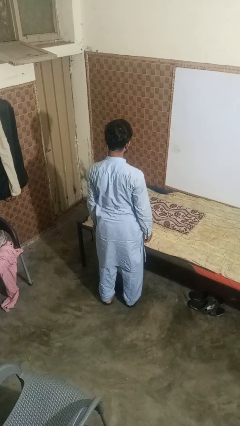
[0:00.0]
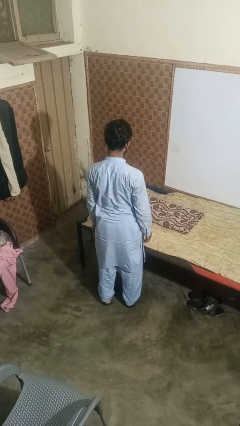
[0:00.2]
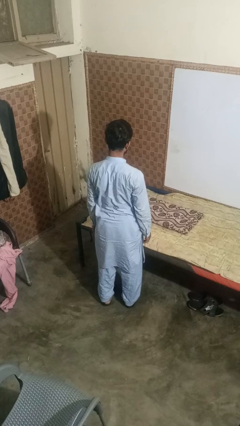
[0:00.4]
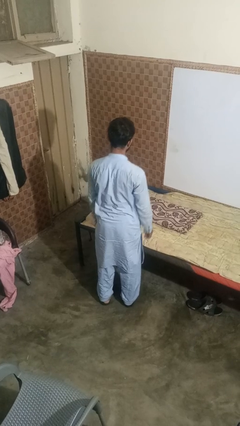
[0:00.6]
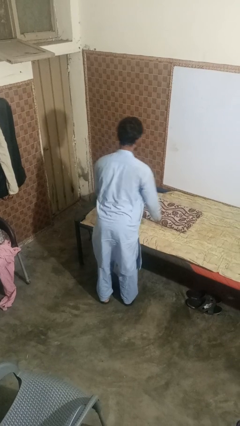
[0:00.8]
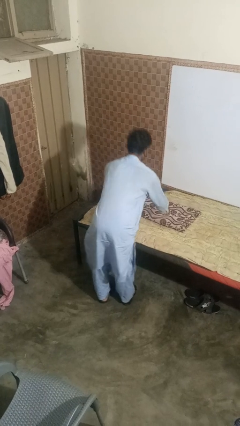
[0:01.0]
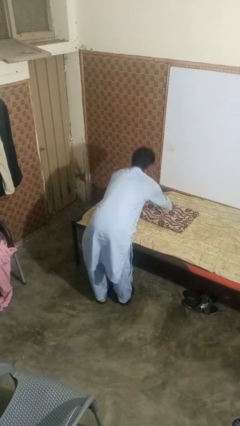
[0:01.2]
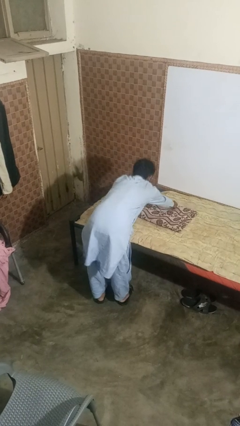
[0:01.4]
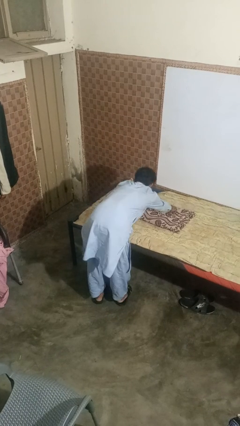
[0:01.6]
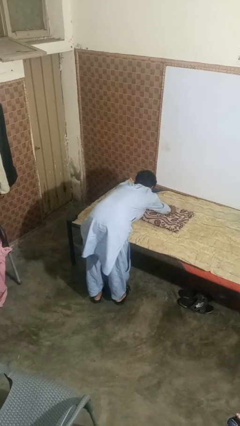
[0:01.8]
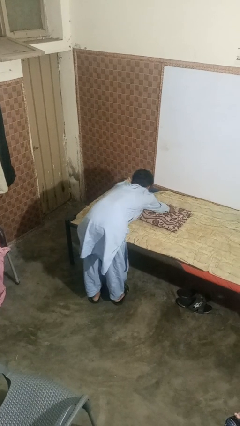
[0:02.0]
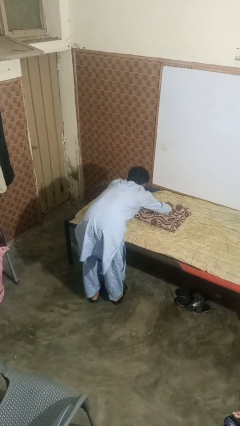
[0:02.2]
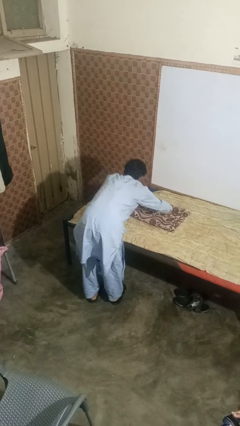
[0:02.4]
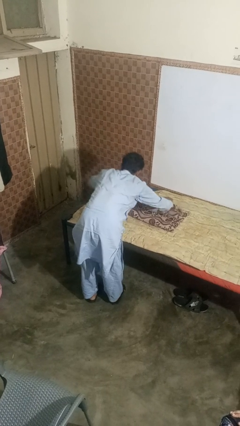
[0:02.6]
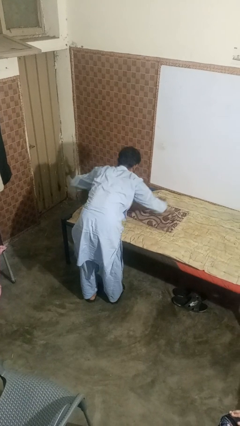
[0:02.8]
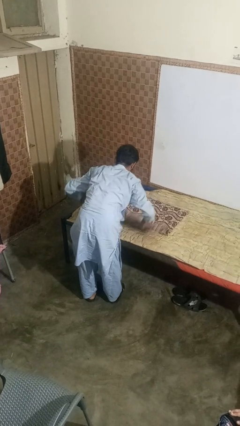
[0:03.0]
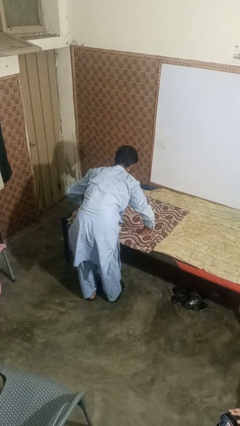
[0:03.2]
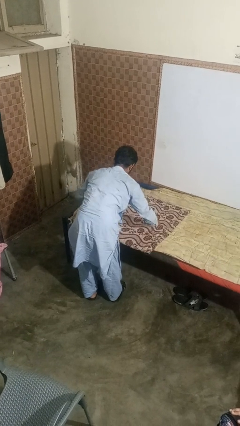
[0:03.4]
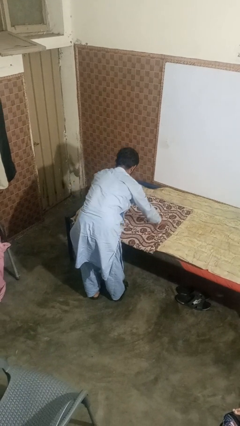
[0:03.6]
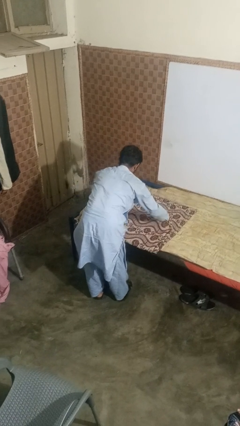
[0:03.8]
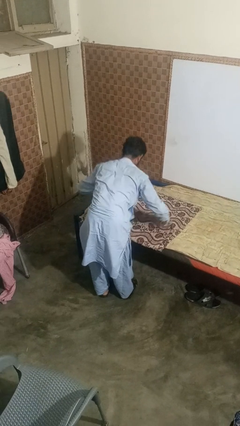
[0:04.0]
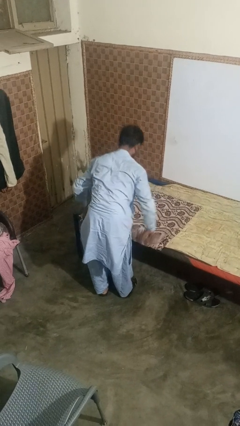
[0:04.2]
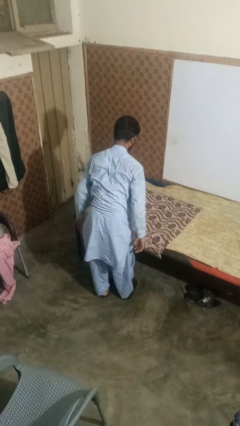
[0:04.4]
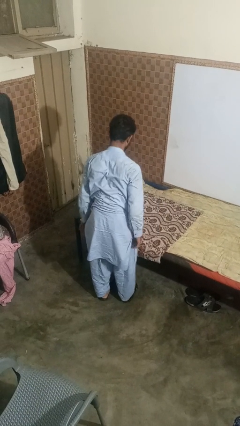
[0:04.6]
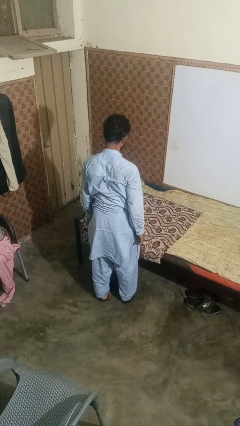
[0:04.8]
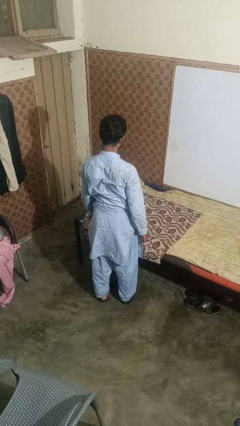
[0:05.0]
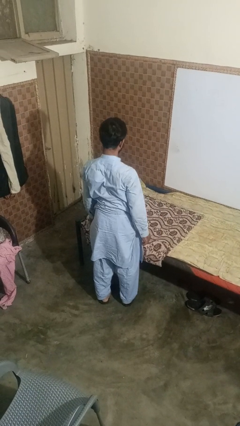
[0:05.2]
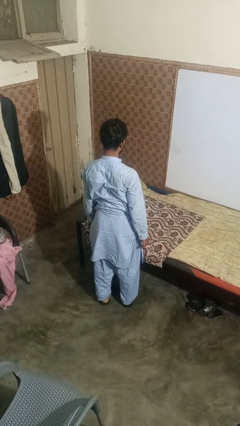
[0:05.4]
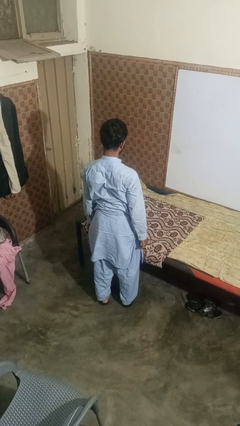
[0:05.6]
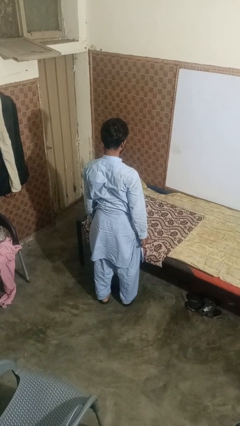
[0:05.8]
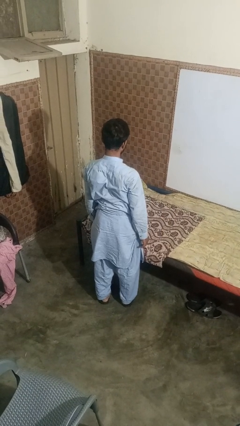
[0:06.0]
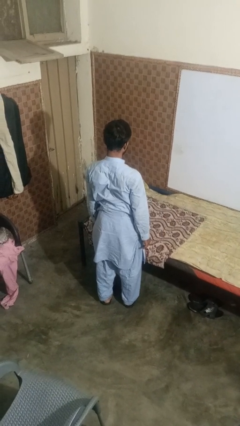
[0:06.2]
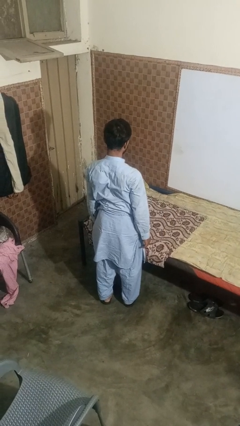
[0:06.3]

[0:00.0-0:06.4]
person unfolds blanket

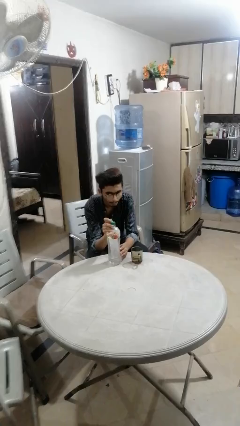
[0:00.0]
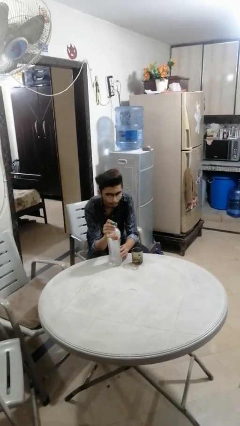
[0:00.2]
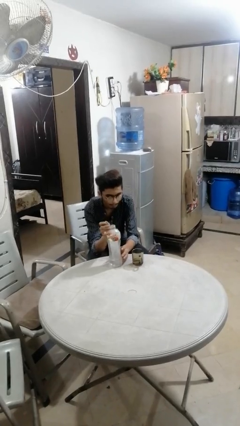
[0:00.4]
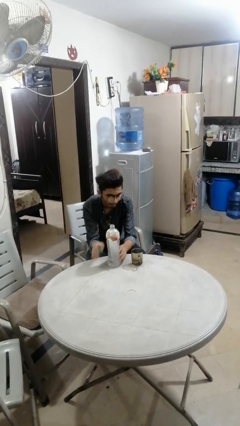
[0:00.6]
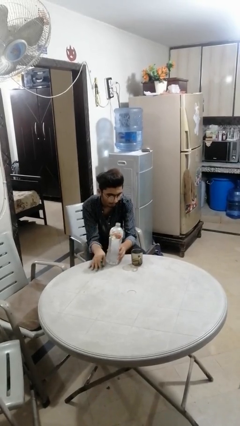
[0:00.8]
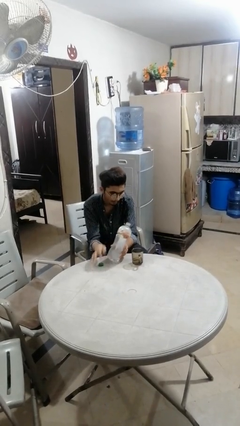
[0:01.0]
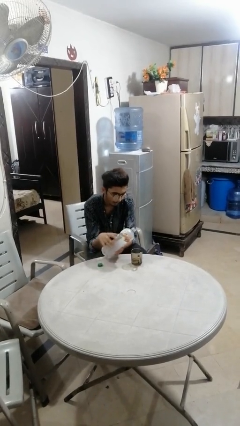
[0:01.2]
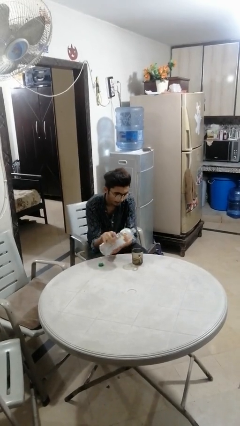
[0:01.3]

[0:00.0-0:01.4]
person unscrews lid from bottle

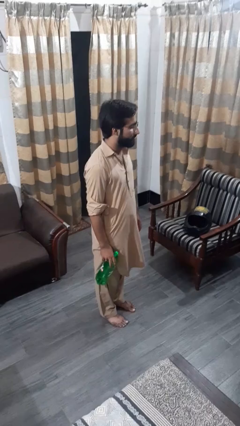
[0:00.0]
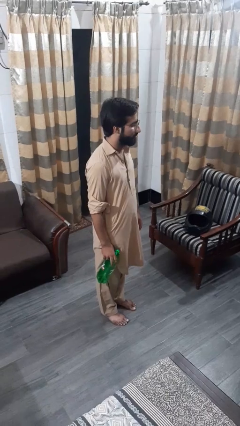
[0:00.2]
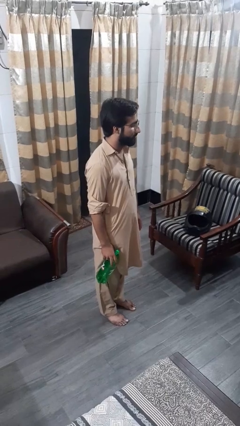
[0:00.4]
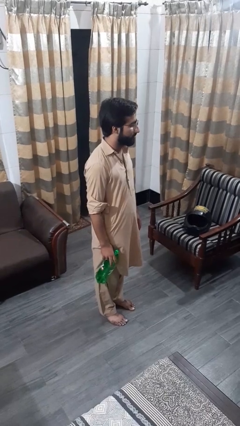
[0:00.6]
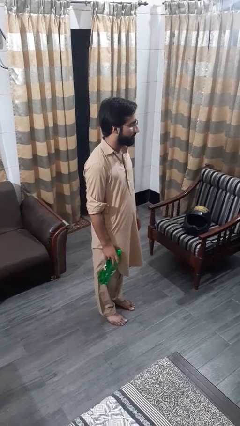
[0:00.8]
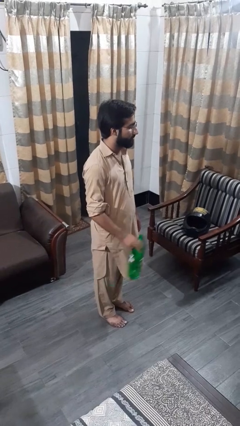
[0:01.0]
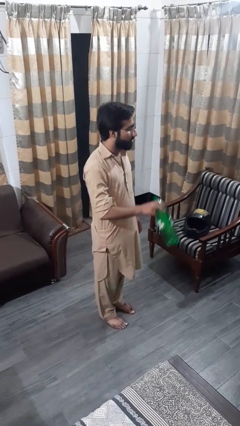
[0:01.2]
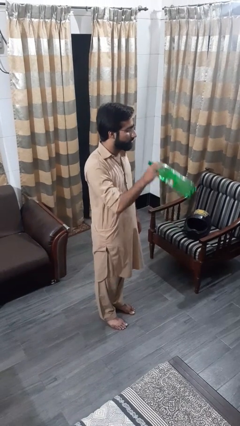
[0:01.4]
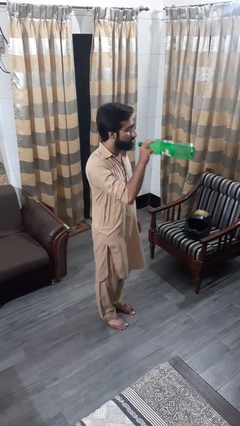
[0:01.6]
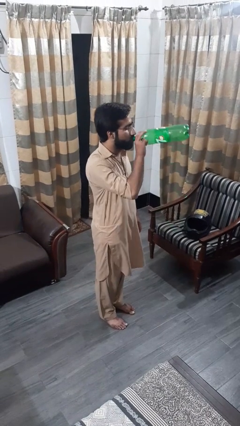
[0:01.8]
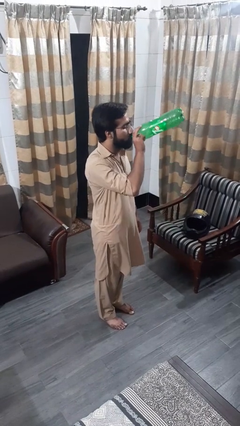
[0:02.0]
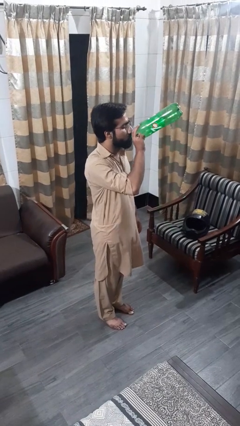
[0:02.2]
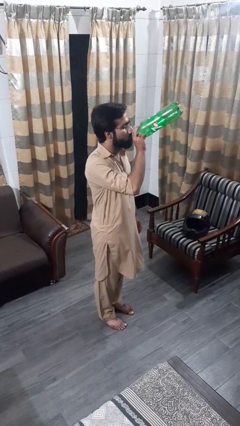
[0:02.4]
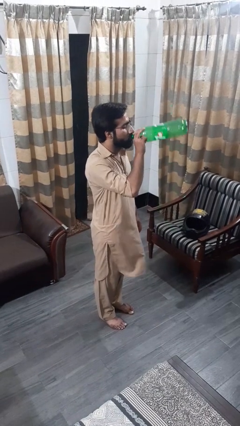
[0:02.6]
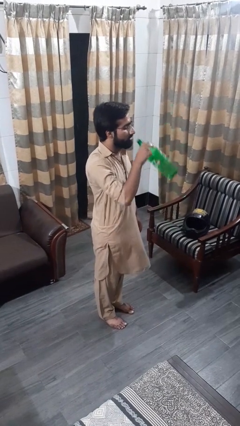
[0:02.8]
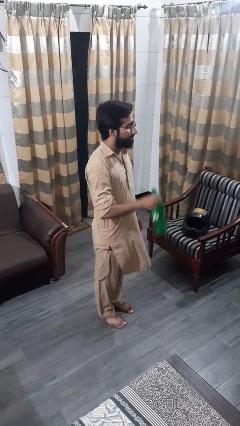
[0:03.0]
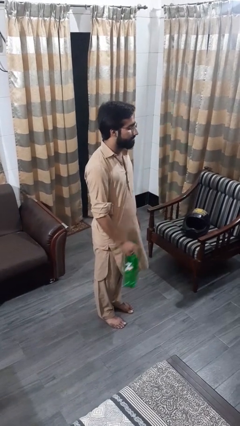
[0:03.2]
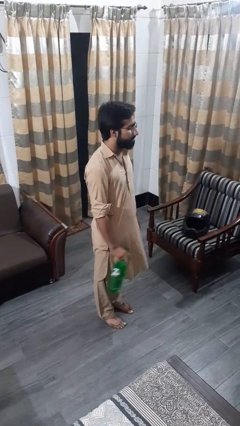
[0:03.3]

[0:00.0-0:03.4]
person drinks from bottle

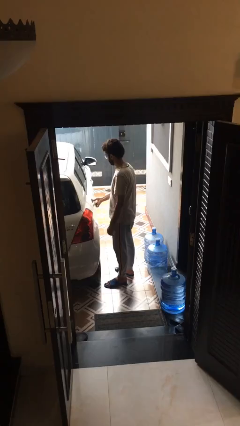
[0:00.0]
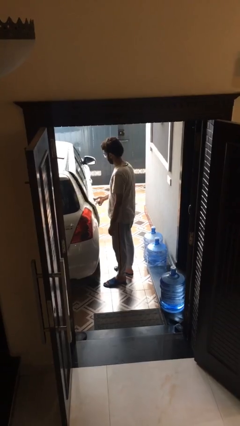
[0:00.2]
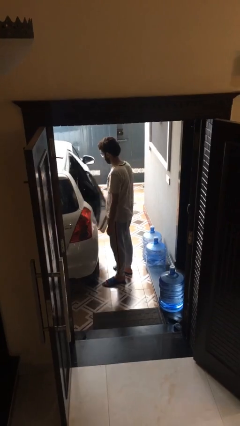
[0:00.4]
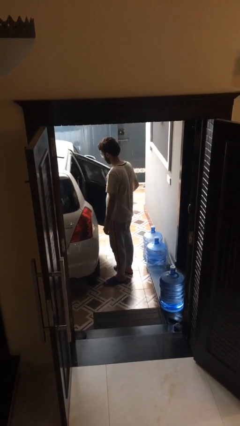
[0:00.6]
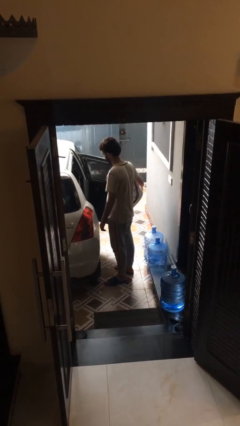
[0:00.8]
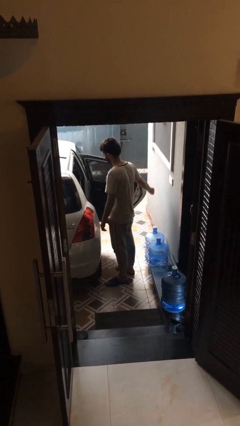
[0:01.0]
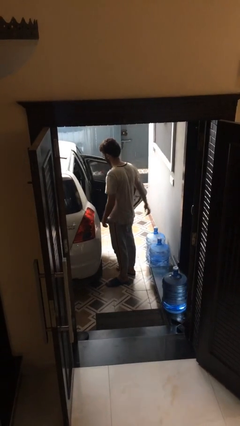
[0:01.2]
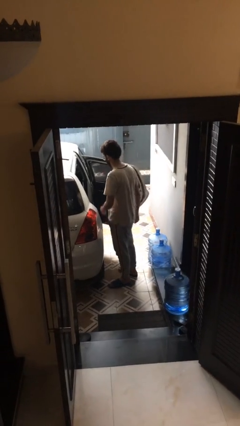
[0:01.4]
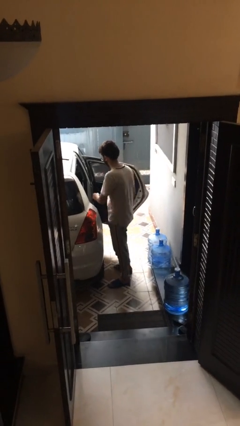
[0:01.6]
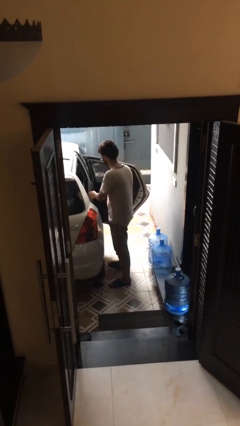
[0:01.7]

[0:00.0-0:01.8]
person opens car door

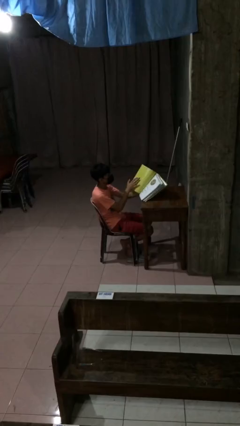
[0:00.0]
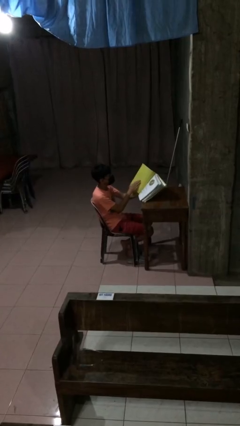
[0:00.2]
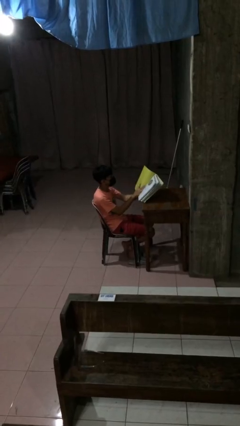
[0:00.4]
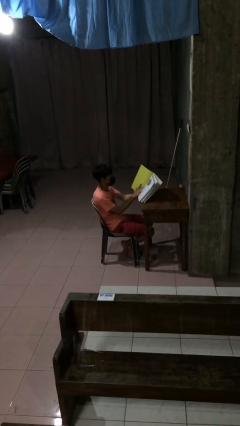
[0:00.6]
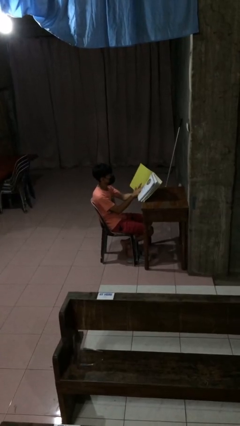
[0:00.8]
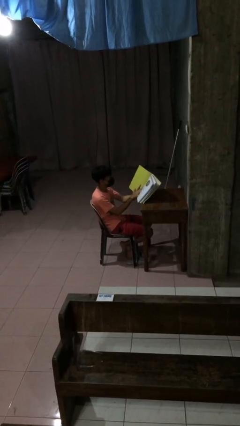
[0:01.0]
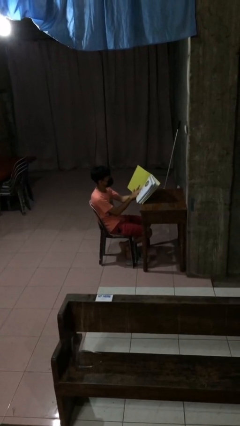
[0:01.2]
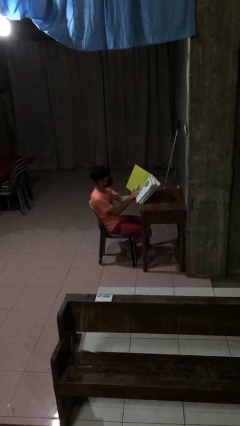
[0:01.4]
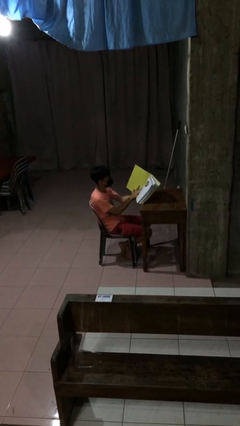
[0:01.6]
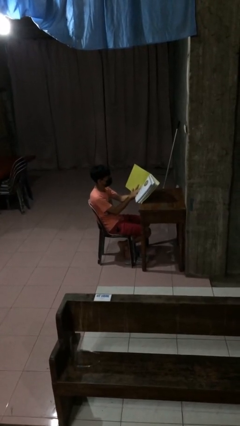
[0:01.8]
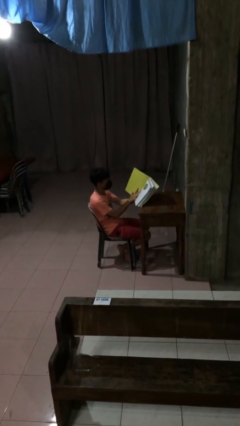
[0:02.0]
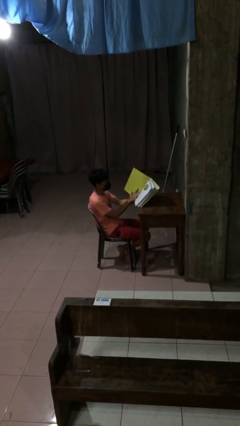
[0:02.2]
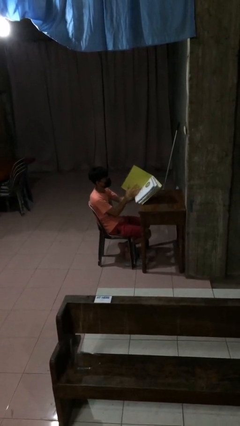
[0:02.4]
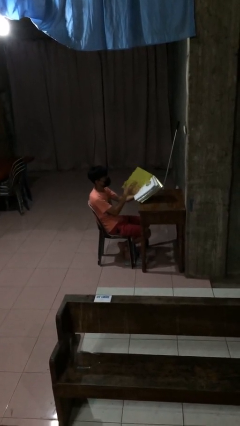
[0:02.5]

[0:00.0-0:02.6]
person reads document

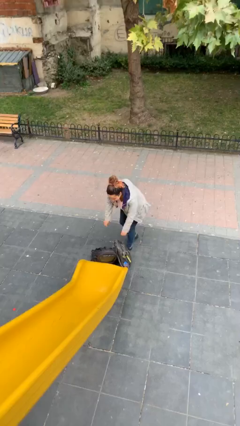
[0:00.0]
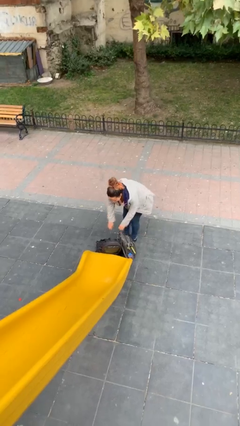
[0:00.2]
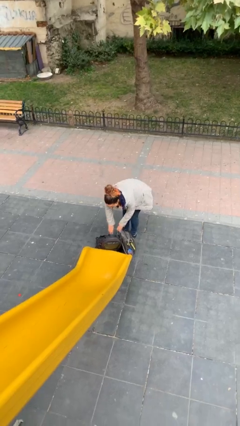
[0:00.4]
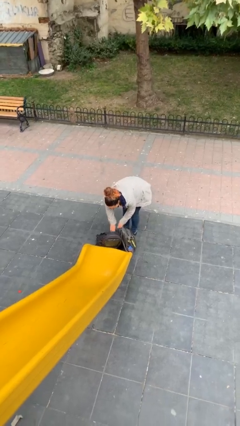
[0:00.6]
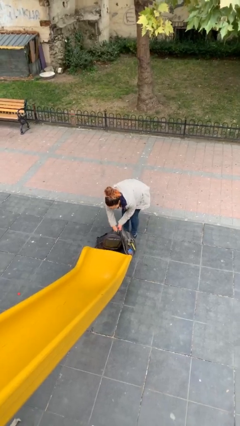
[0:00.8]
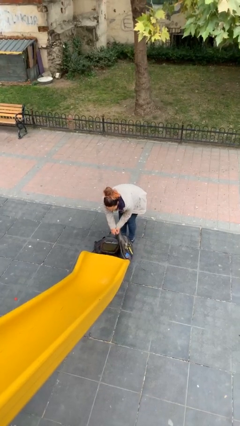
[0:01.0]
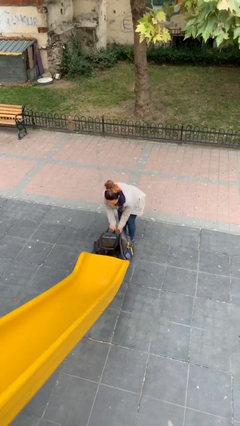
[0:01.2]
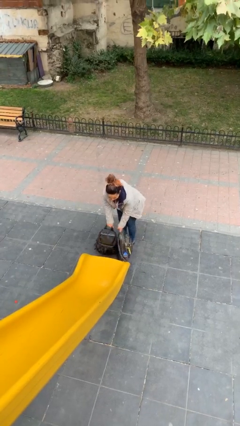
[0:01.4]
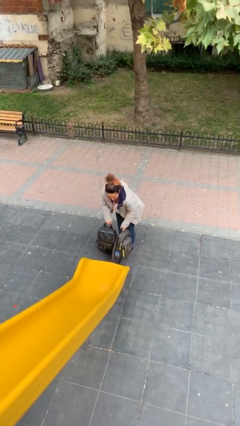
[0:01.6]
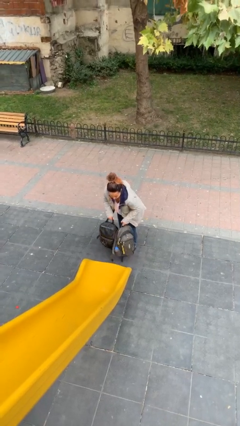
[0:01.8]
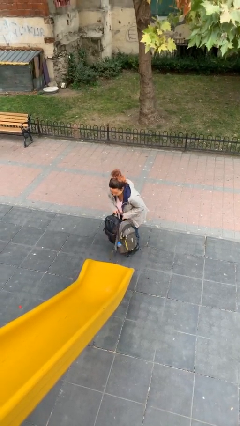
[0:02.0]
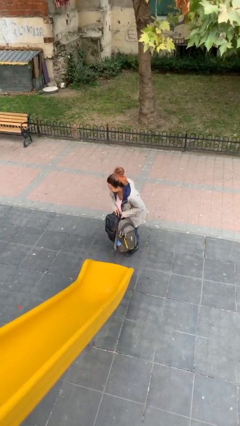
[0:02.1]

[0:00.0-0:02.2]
person picks up object from floor

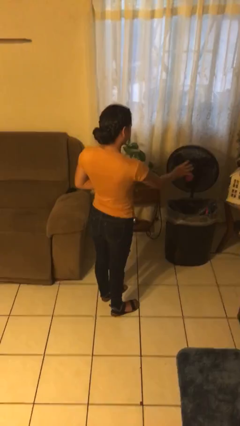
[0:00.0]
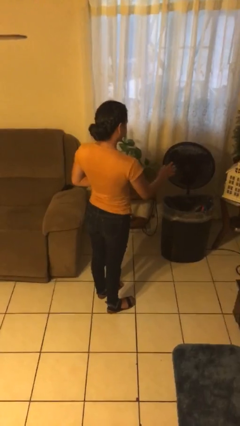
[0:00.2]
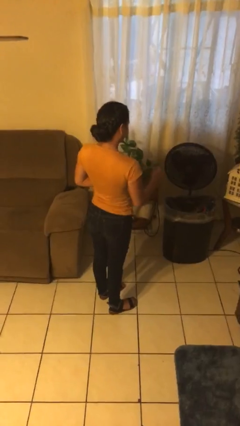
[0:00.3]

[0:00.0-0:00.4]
person discards trash
